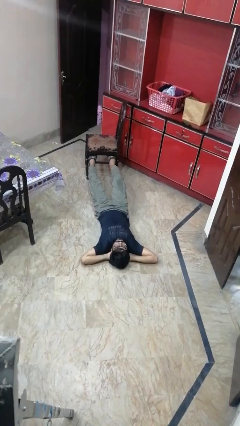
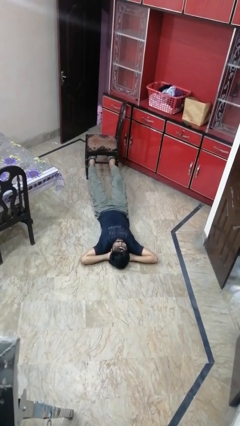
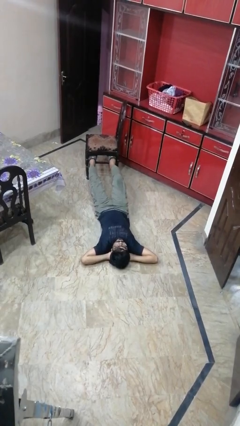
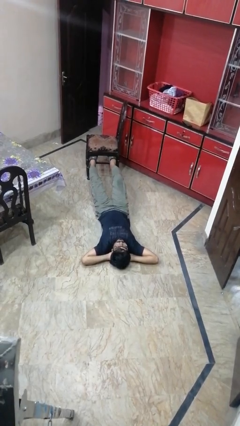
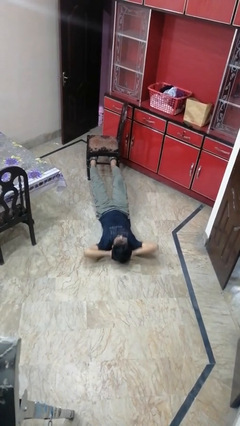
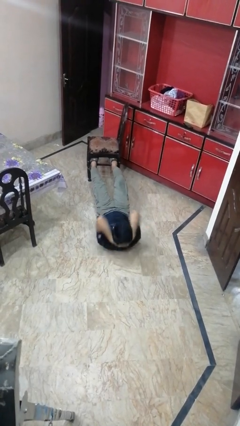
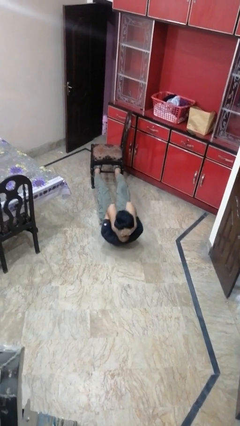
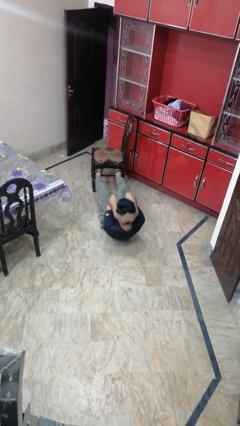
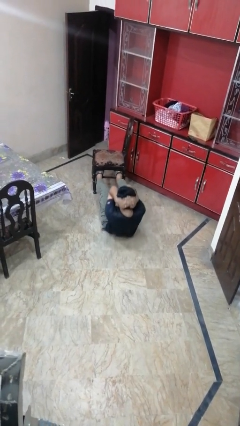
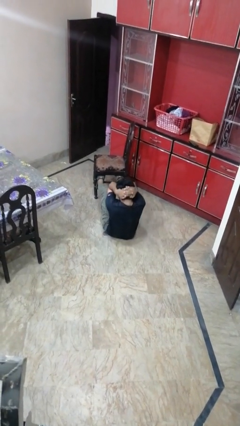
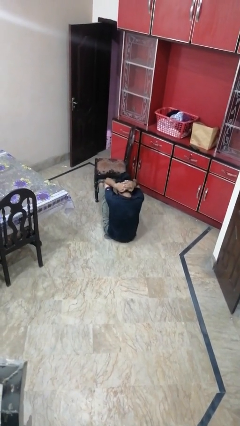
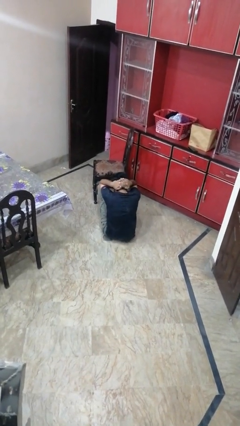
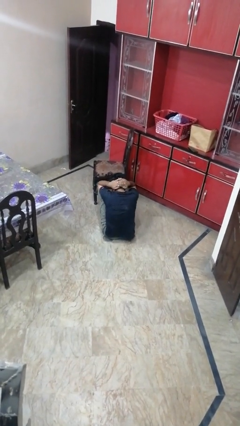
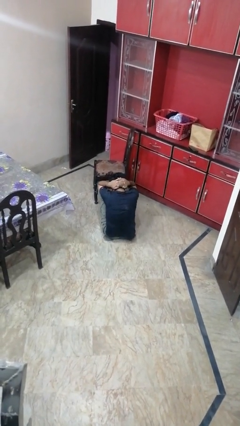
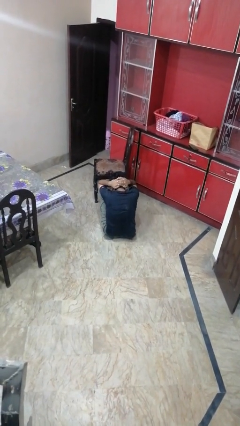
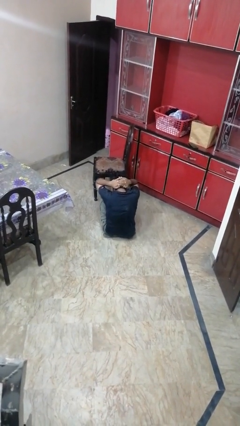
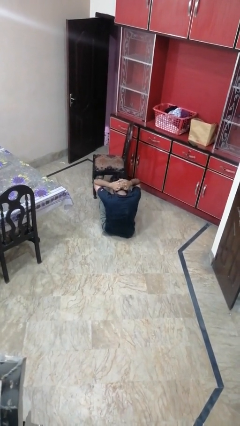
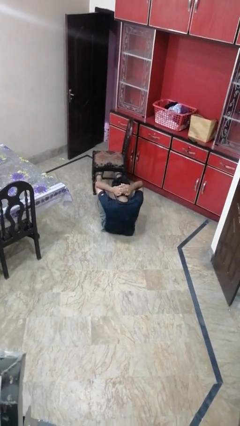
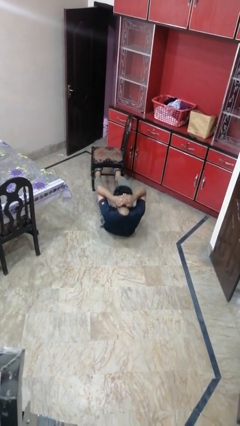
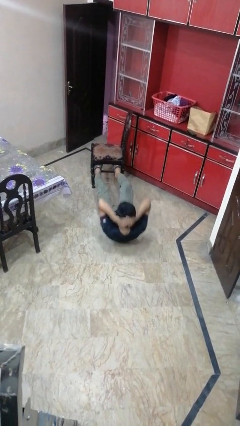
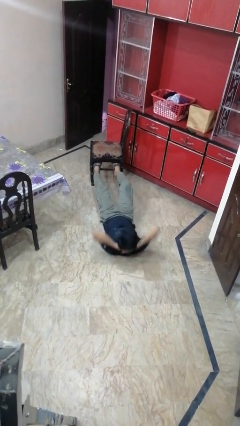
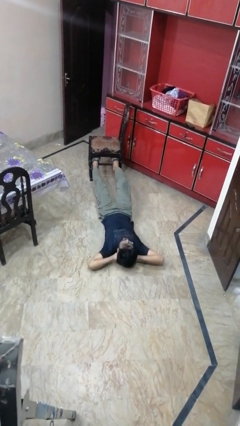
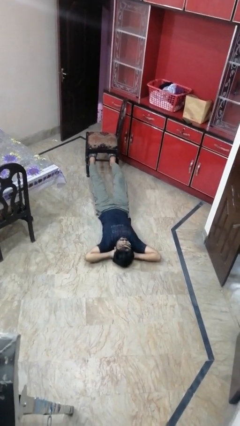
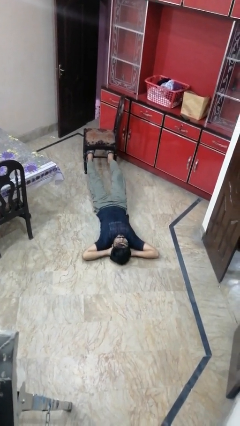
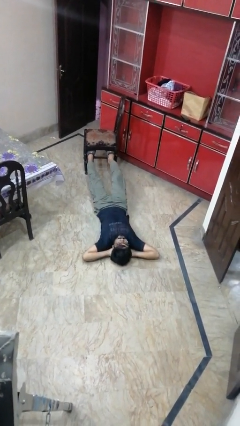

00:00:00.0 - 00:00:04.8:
person exercises with situp

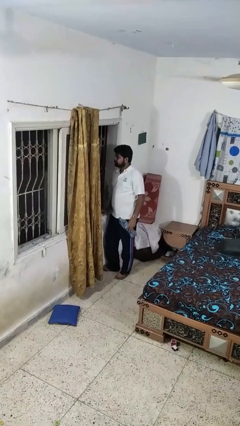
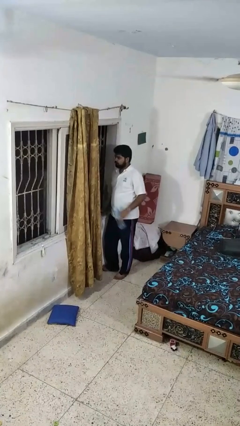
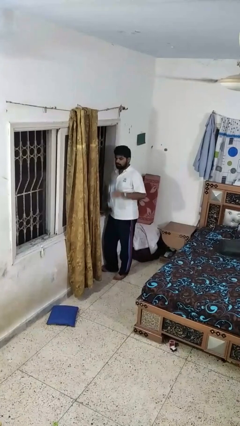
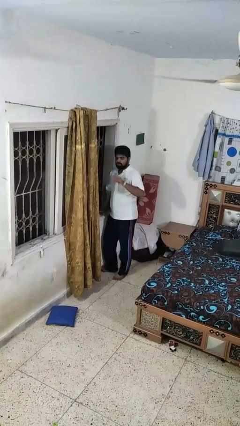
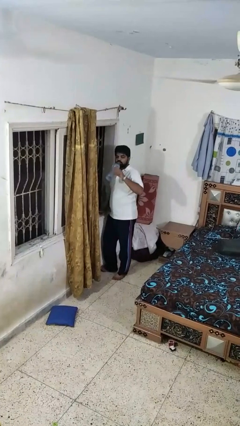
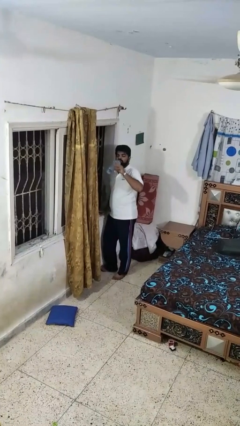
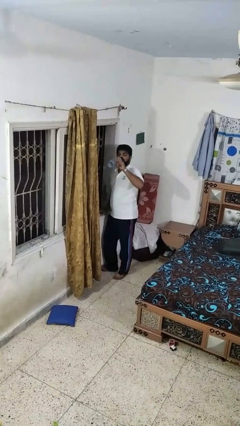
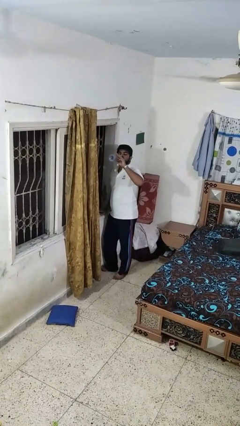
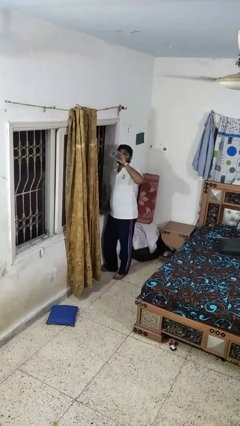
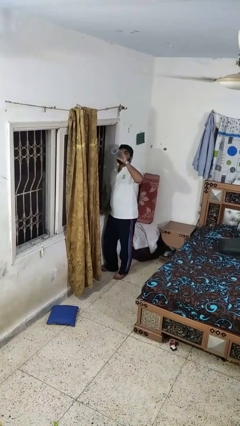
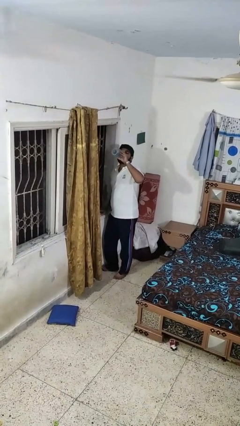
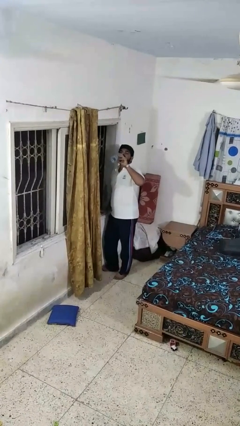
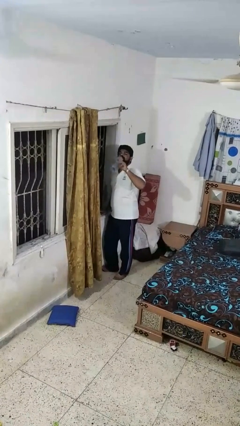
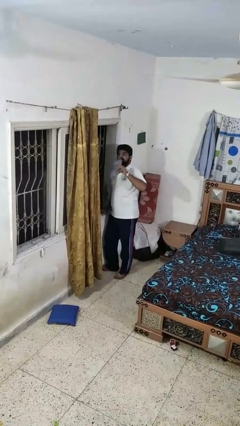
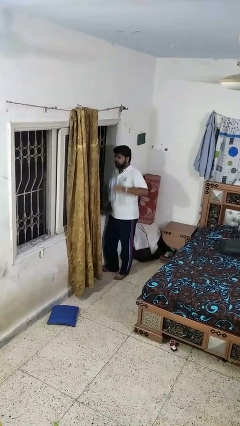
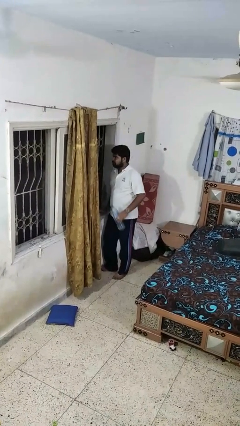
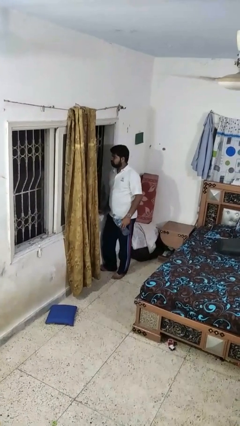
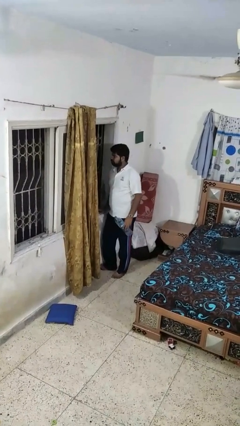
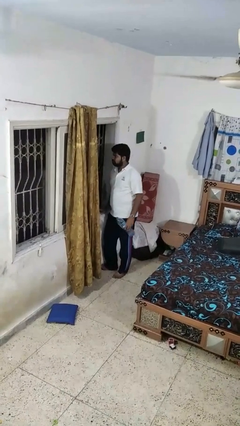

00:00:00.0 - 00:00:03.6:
person drinks from bottle

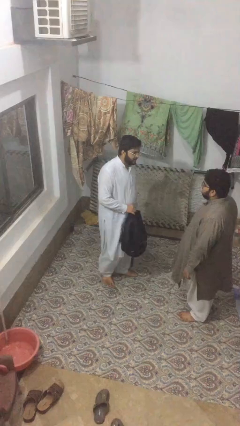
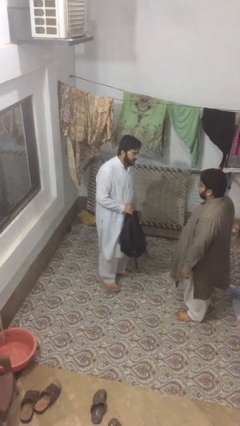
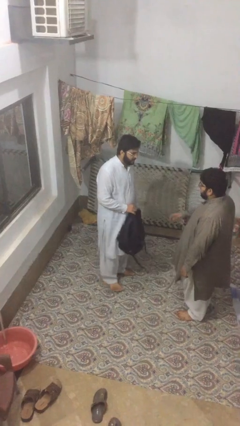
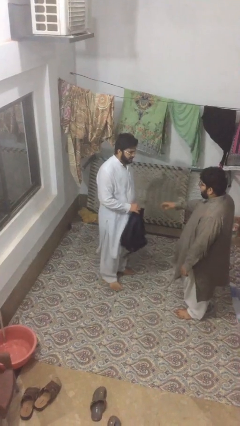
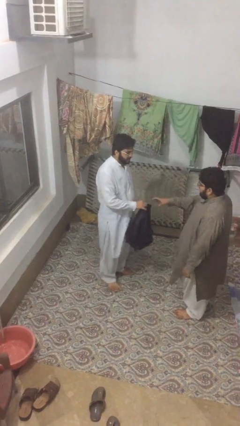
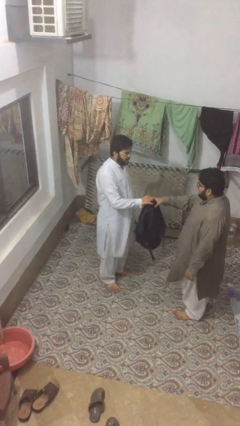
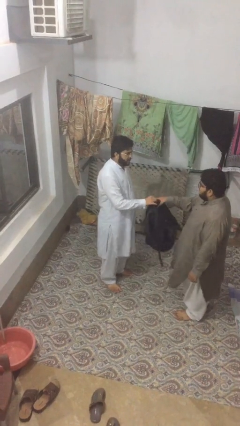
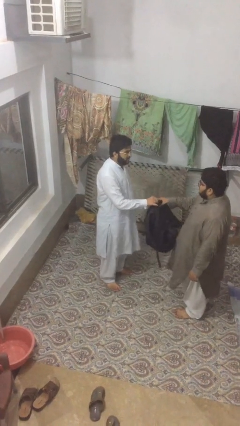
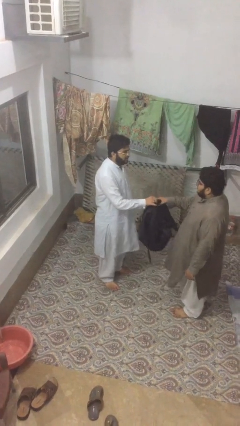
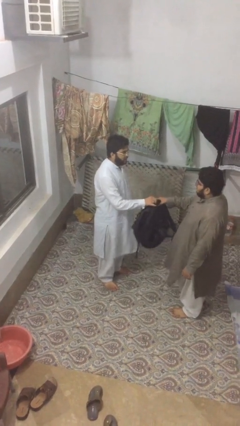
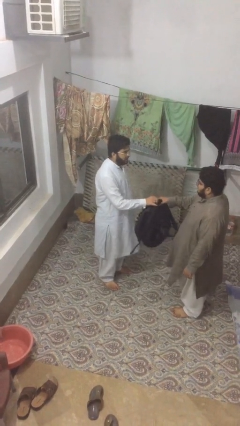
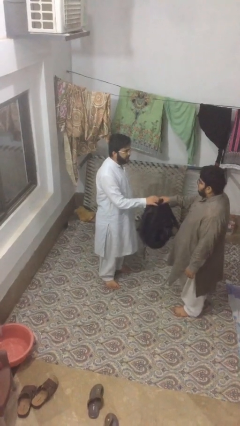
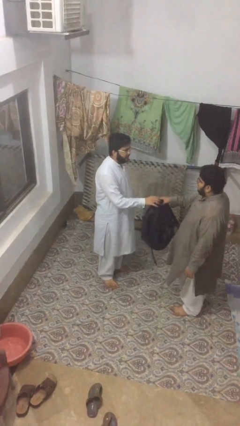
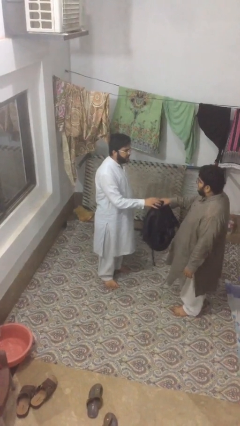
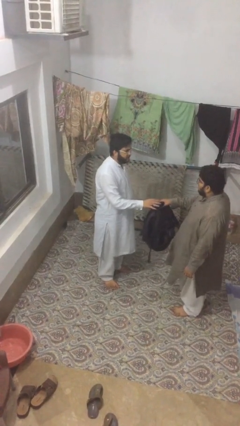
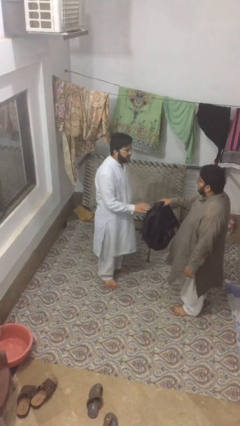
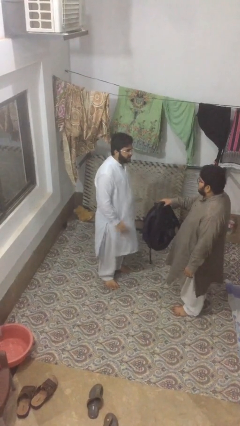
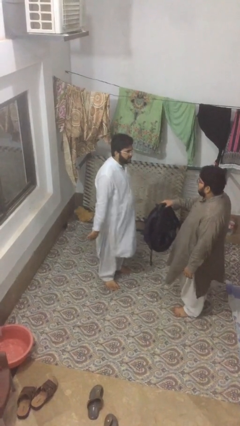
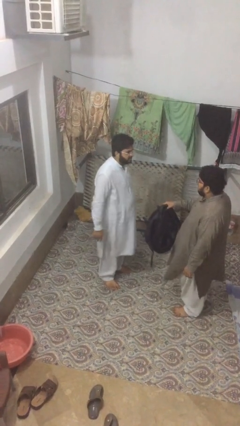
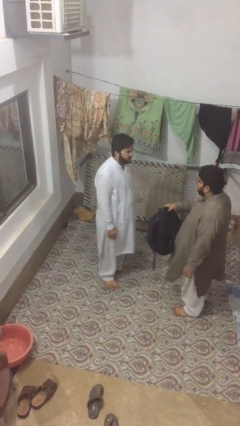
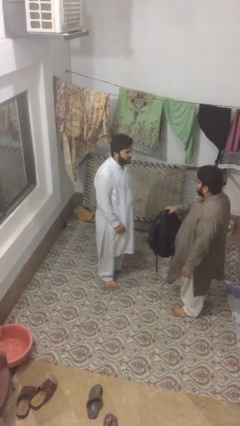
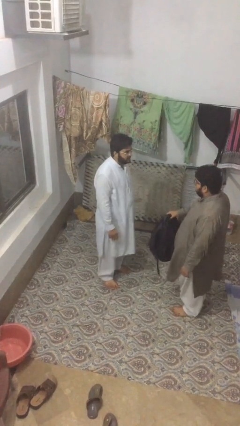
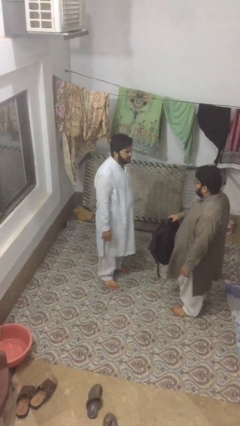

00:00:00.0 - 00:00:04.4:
person transfers object to person

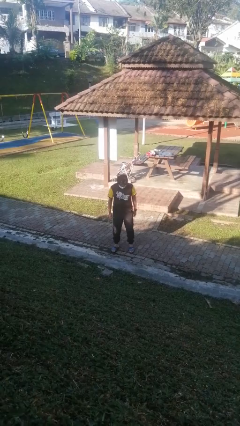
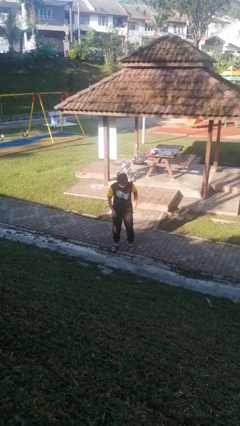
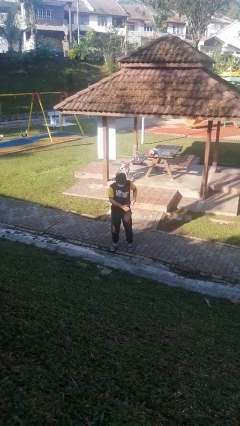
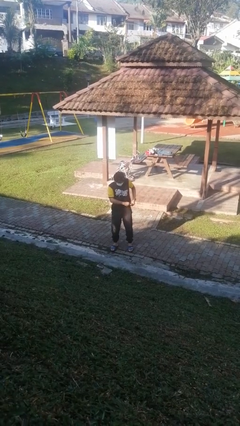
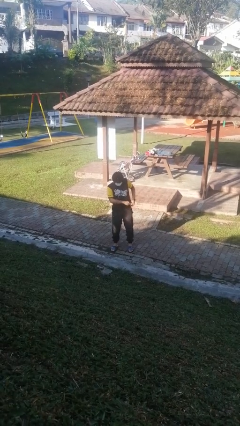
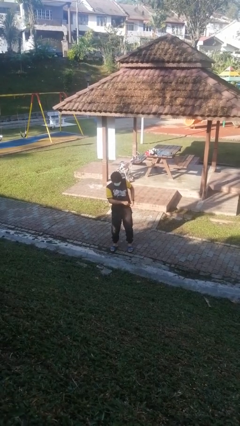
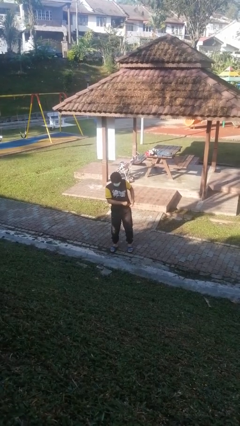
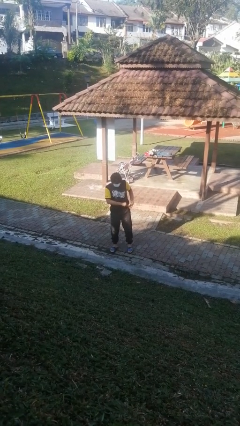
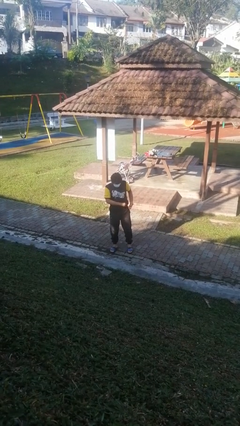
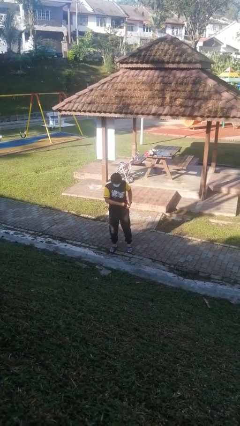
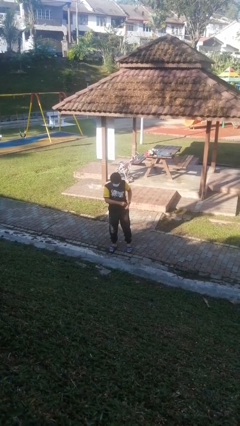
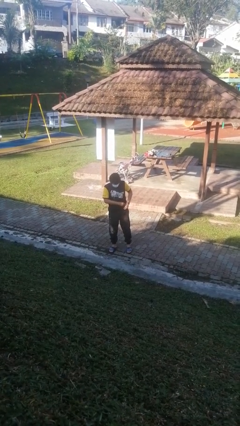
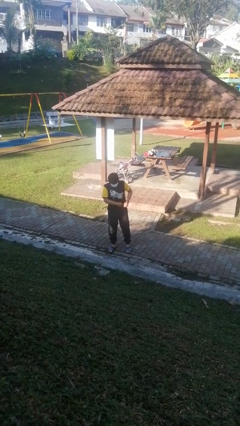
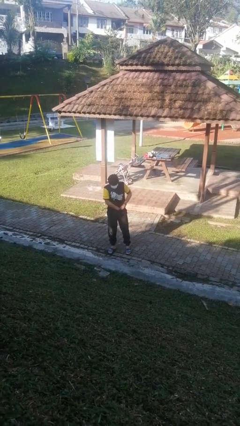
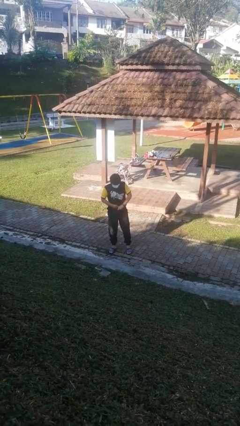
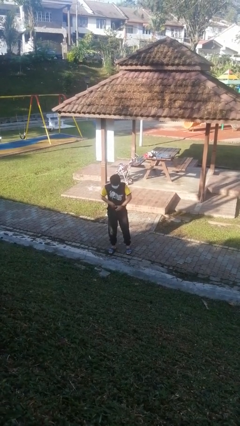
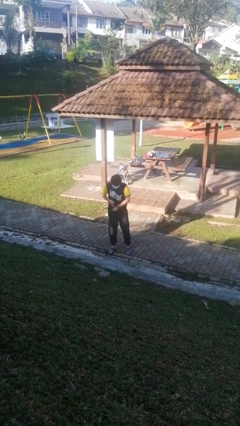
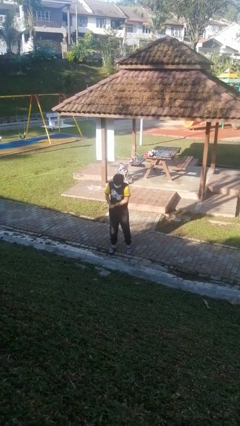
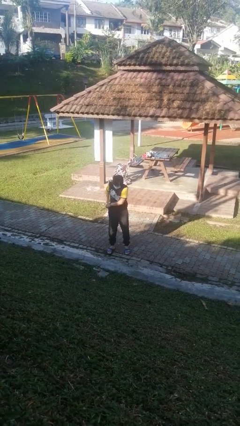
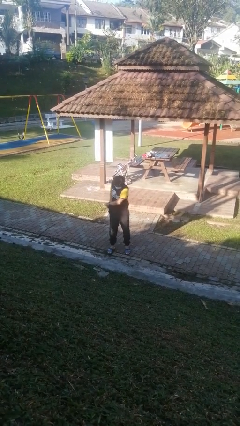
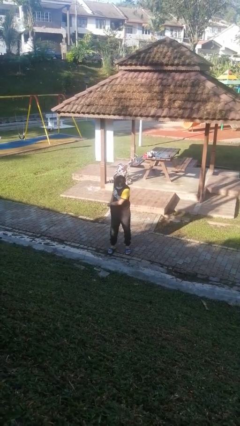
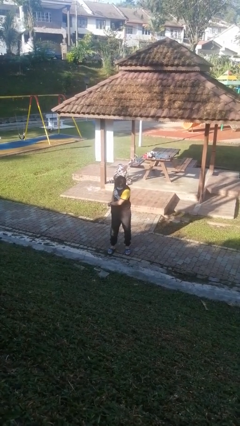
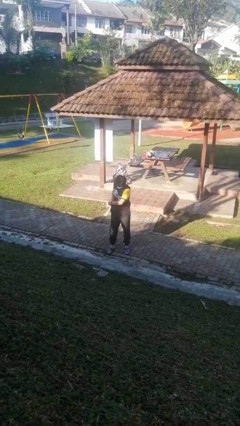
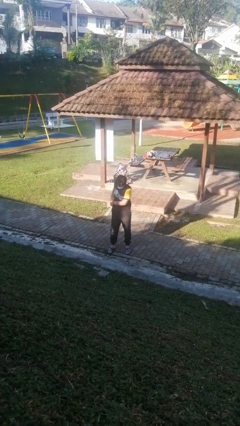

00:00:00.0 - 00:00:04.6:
person tucks in shirt
